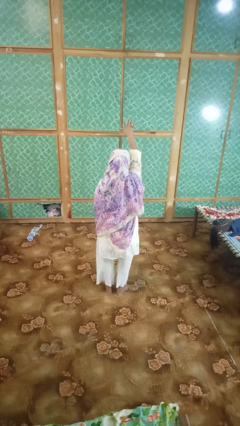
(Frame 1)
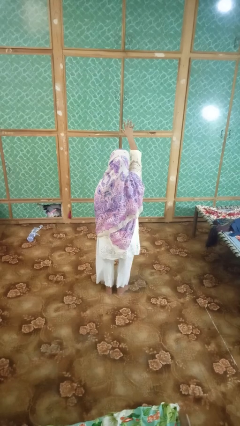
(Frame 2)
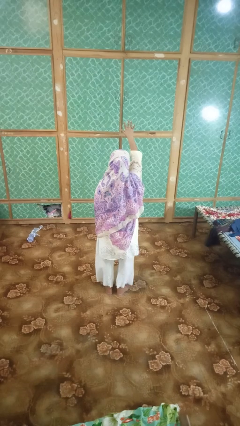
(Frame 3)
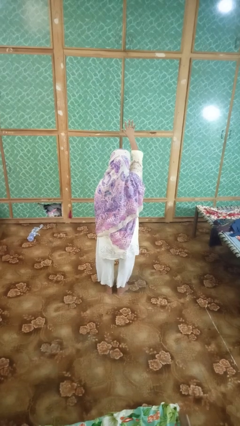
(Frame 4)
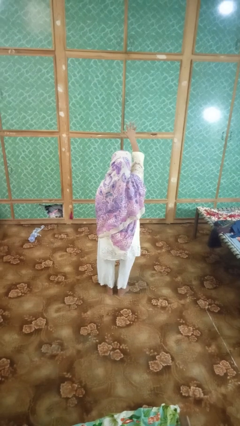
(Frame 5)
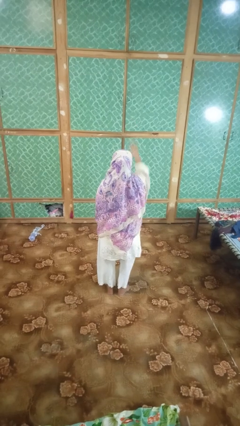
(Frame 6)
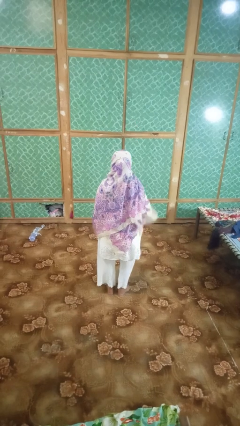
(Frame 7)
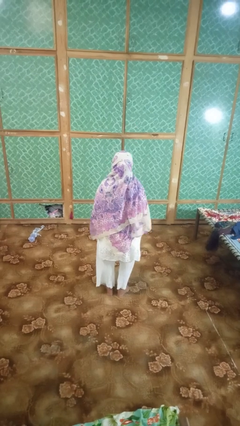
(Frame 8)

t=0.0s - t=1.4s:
person gestures number five

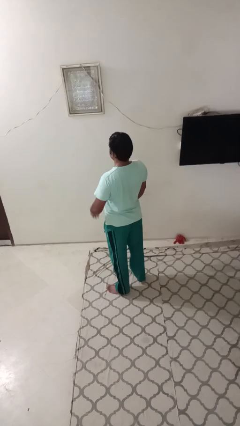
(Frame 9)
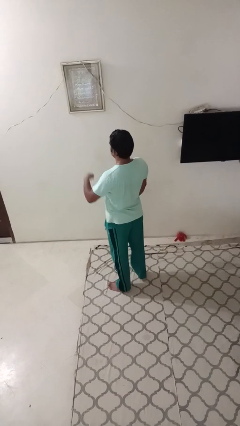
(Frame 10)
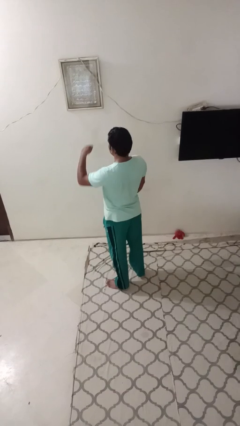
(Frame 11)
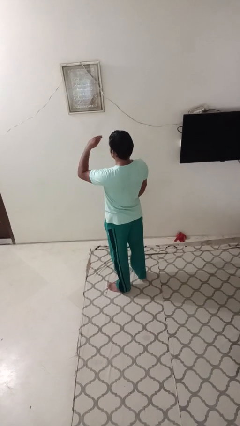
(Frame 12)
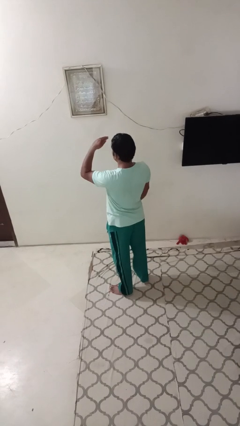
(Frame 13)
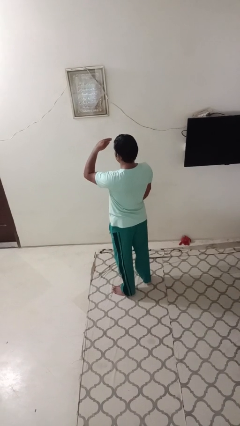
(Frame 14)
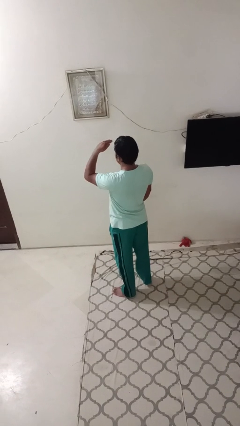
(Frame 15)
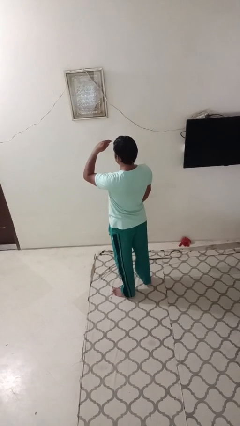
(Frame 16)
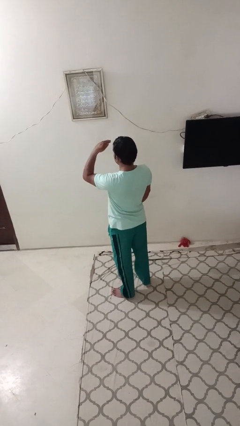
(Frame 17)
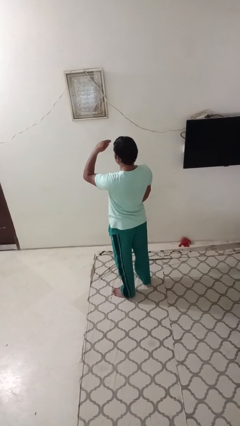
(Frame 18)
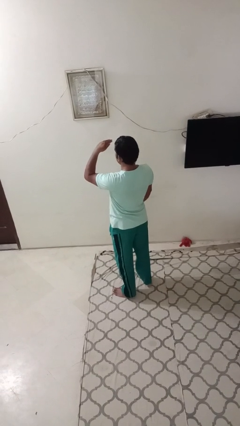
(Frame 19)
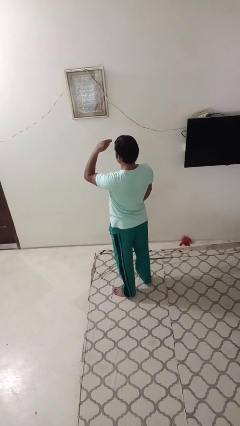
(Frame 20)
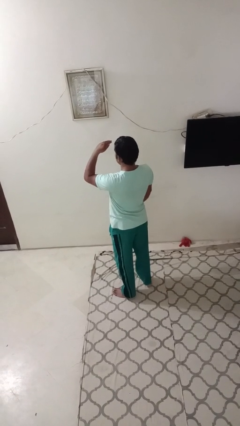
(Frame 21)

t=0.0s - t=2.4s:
person gestures swipe up

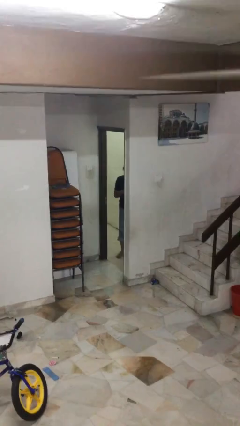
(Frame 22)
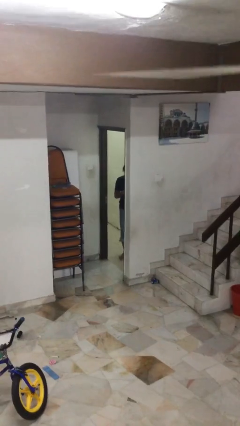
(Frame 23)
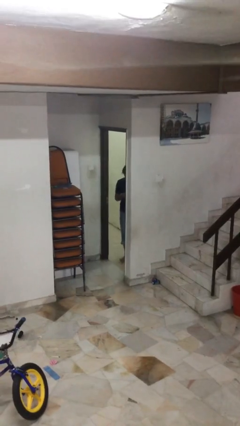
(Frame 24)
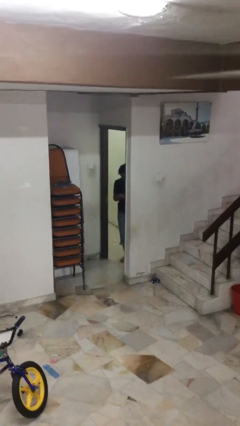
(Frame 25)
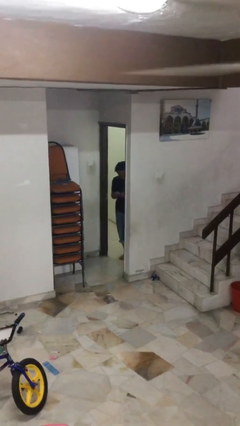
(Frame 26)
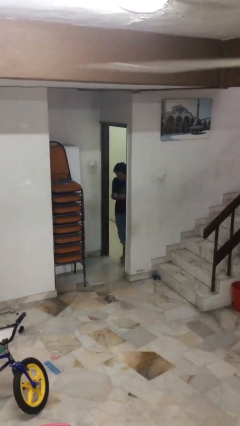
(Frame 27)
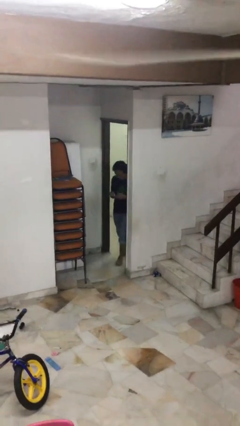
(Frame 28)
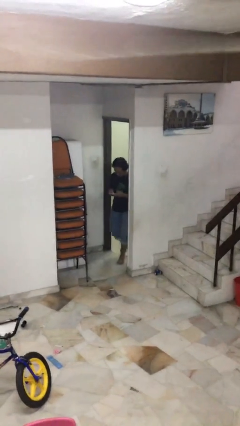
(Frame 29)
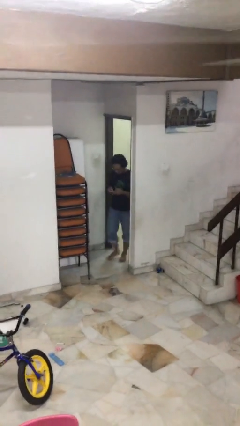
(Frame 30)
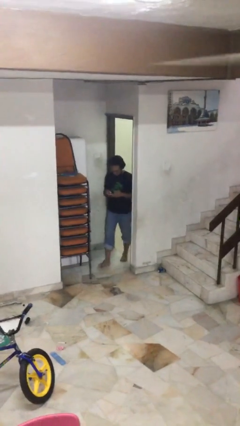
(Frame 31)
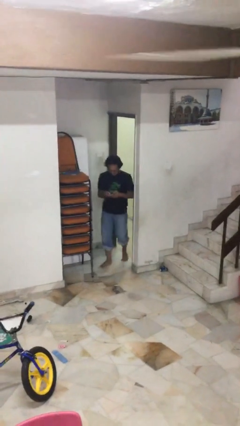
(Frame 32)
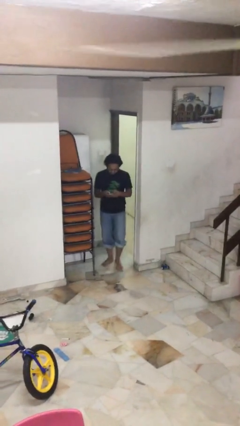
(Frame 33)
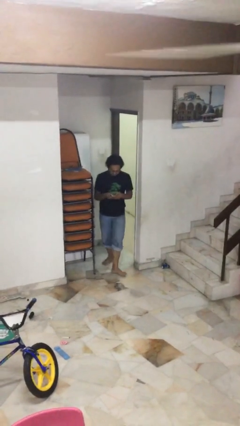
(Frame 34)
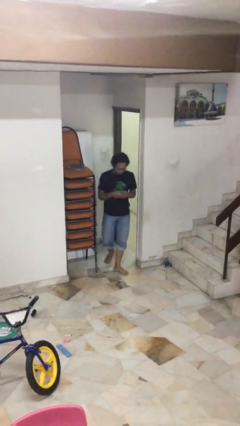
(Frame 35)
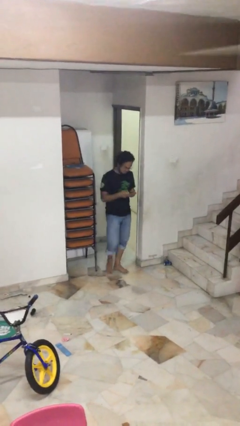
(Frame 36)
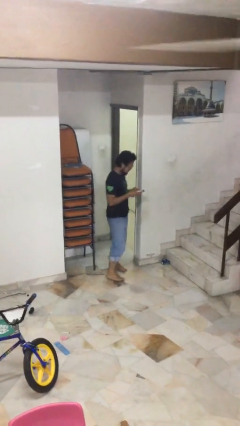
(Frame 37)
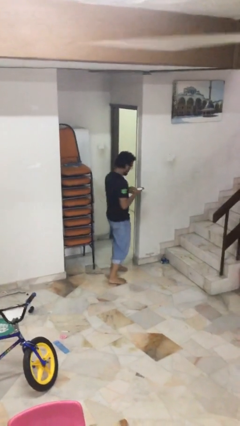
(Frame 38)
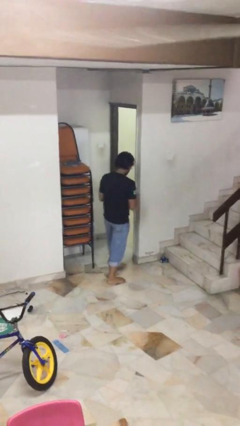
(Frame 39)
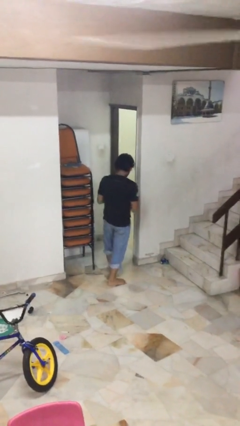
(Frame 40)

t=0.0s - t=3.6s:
person enters scene through structure

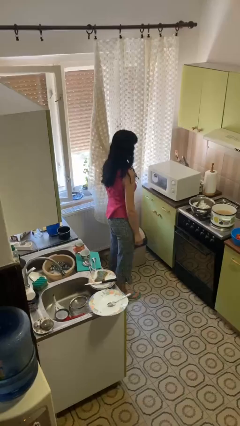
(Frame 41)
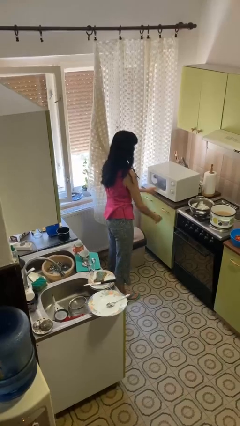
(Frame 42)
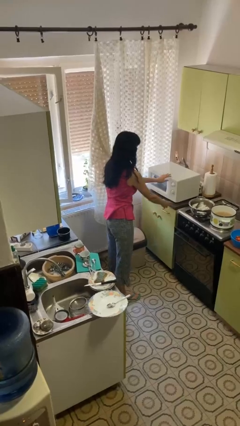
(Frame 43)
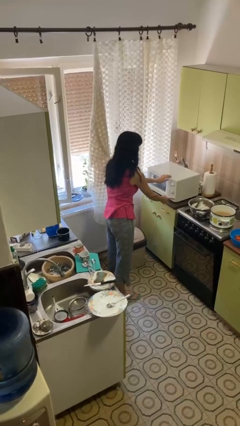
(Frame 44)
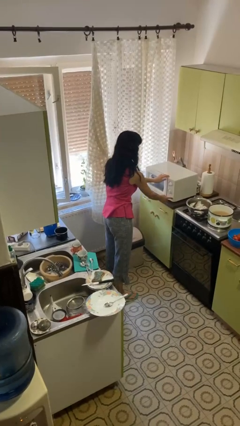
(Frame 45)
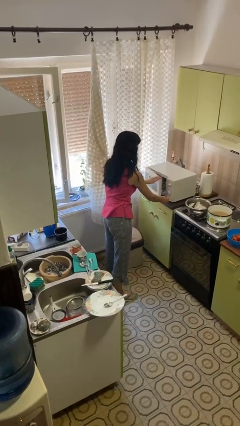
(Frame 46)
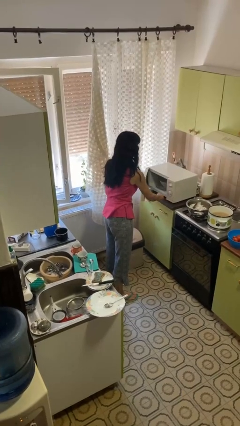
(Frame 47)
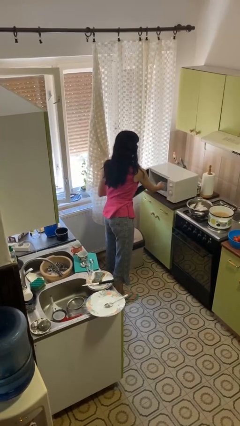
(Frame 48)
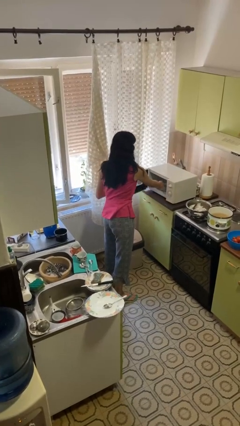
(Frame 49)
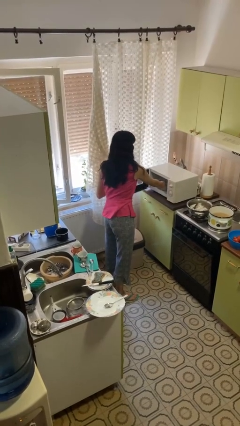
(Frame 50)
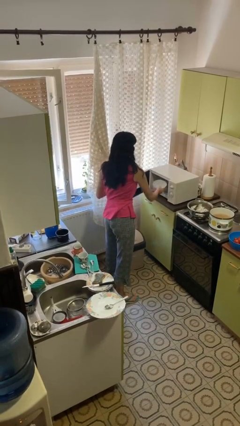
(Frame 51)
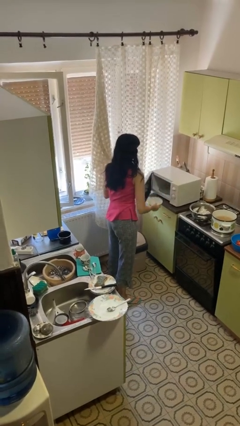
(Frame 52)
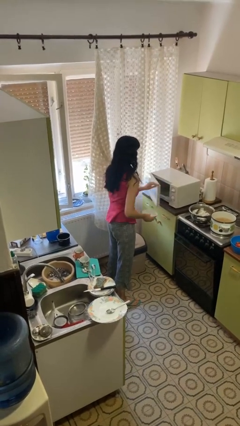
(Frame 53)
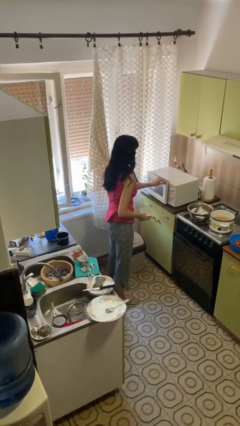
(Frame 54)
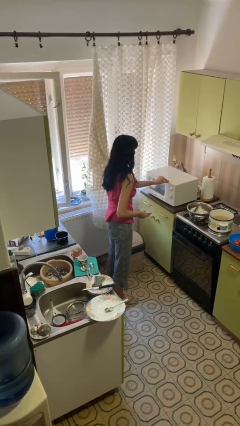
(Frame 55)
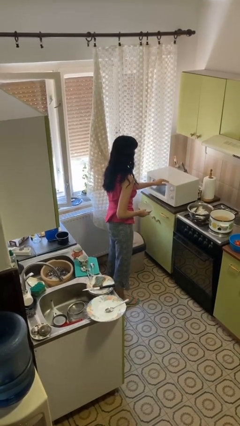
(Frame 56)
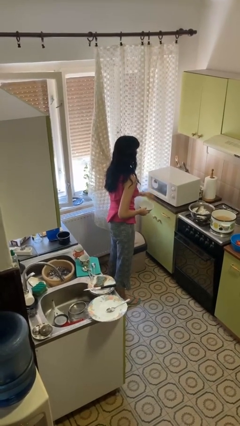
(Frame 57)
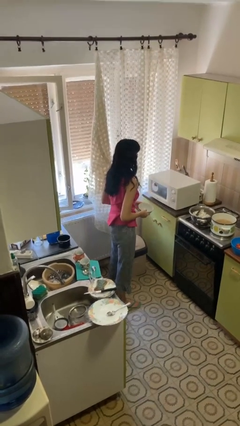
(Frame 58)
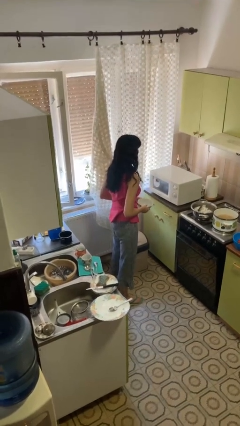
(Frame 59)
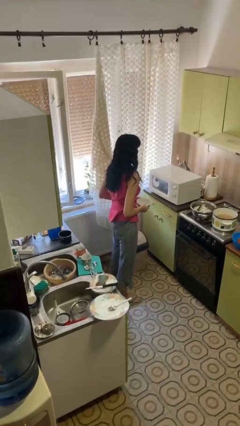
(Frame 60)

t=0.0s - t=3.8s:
person takes object from microwave

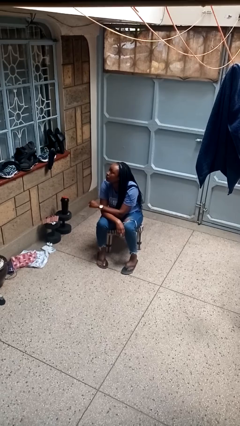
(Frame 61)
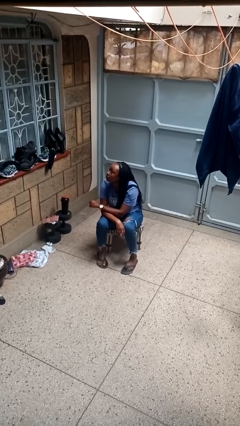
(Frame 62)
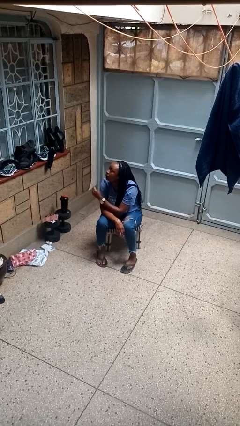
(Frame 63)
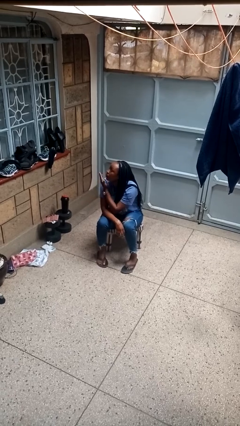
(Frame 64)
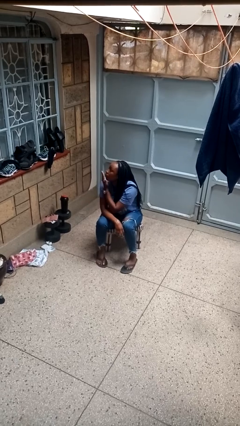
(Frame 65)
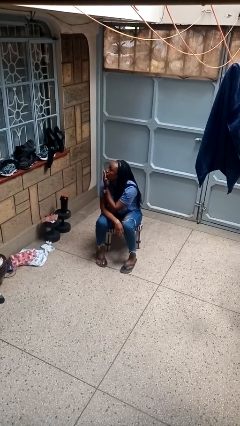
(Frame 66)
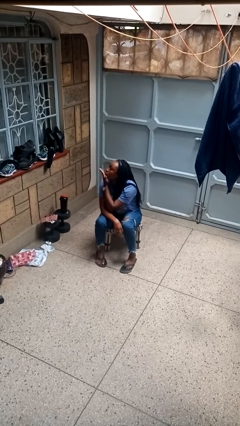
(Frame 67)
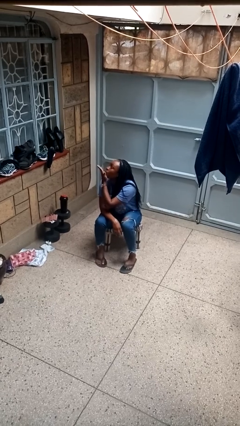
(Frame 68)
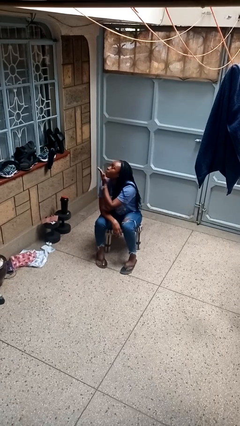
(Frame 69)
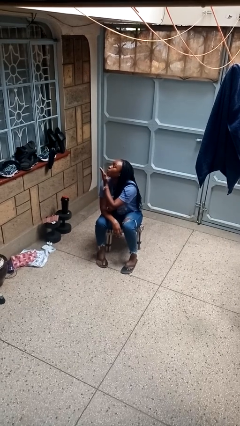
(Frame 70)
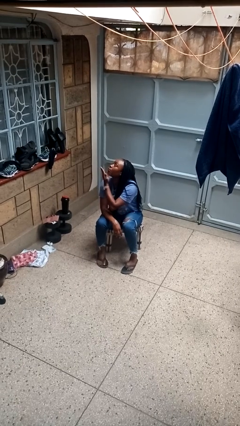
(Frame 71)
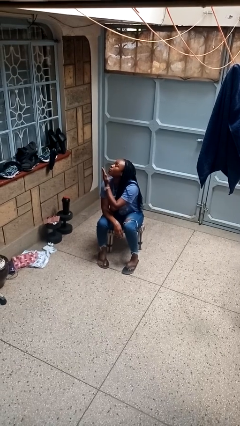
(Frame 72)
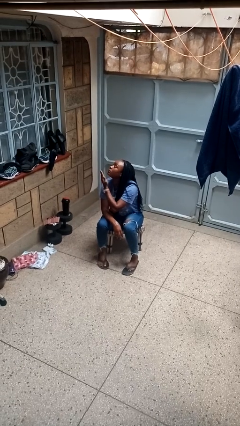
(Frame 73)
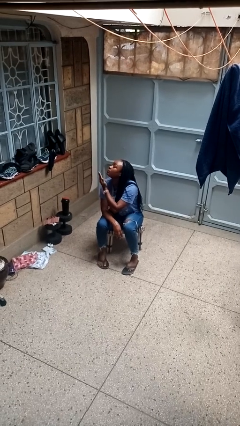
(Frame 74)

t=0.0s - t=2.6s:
person gestures blow kiss

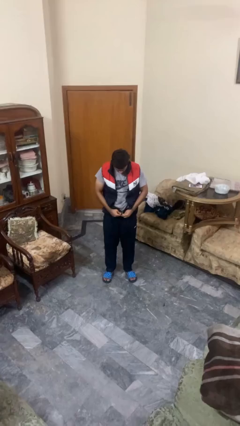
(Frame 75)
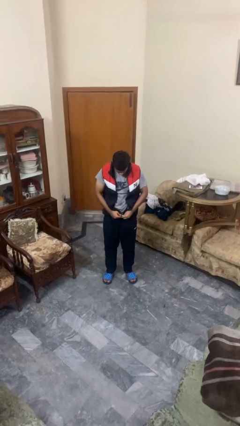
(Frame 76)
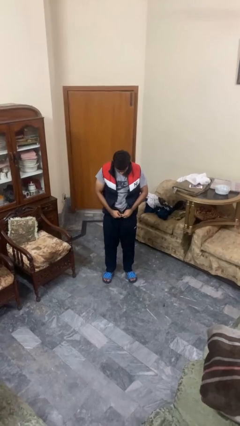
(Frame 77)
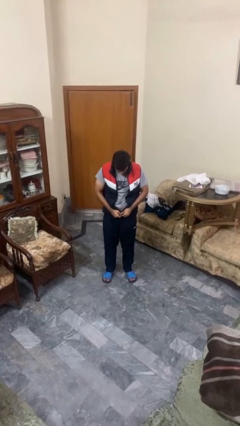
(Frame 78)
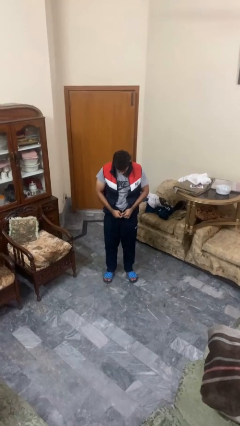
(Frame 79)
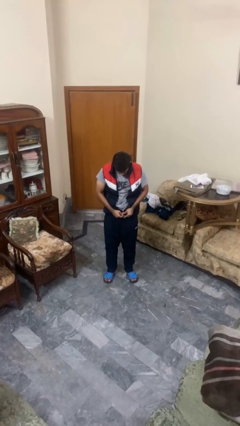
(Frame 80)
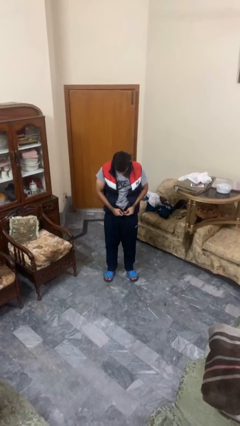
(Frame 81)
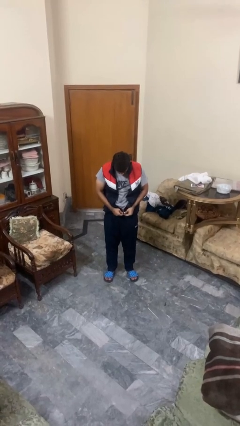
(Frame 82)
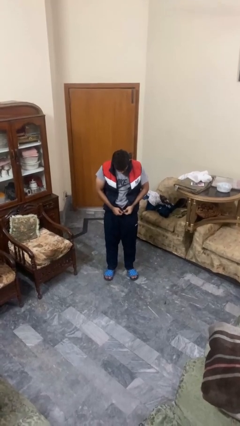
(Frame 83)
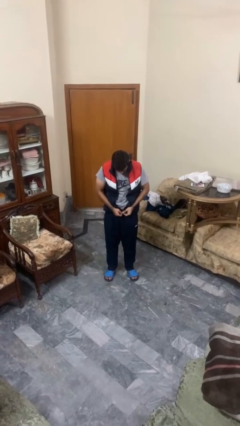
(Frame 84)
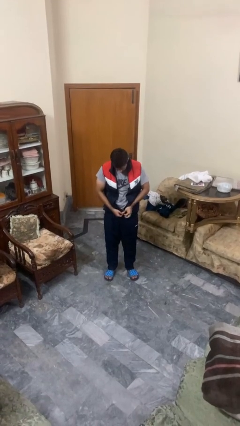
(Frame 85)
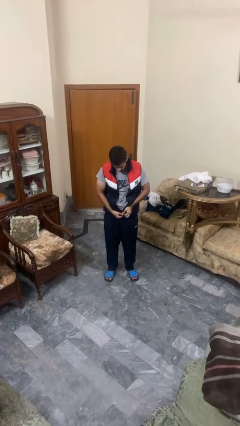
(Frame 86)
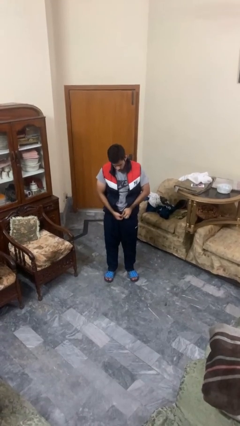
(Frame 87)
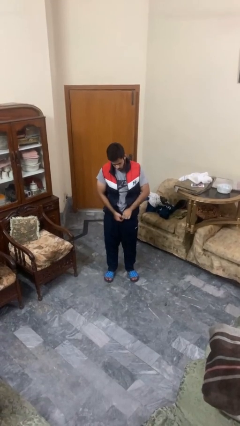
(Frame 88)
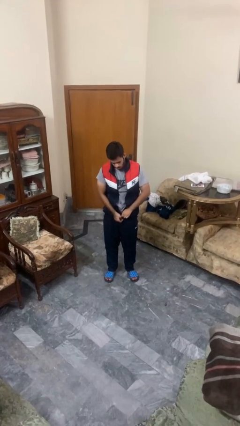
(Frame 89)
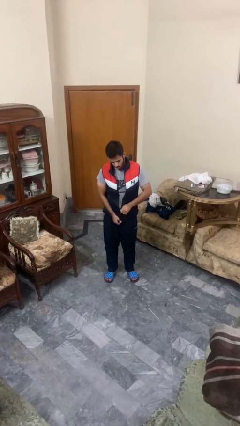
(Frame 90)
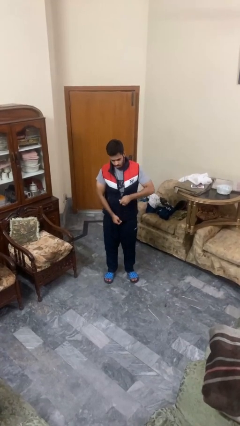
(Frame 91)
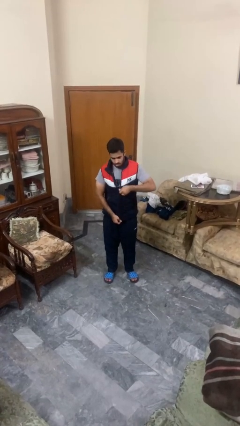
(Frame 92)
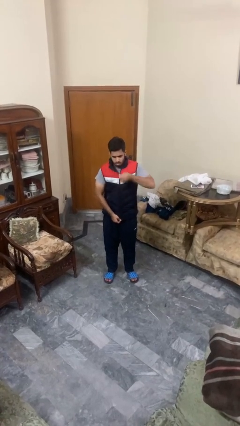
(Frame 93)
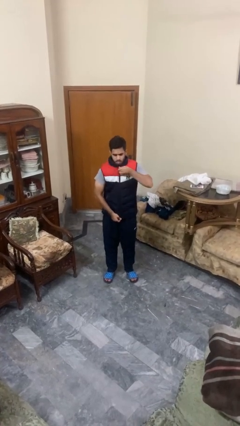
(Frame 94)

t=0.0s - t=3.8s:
person zips up jacket
